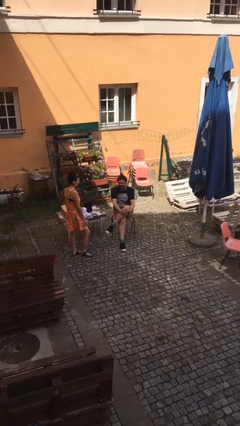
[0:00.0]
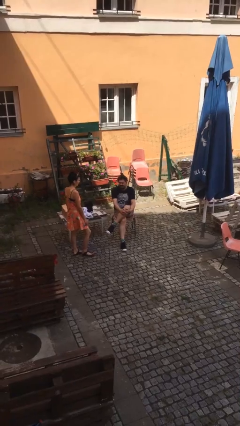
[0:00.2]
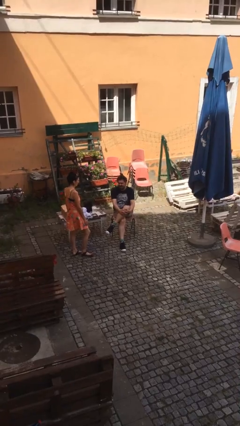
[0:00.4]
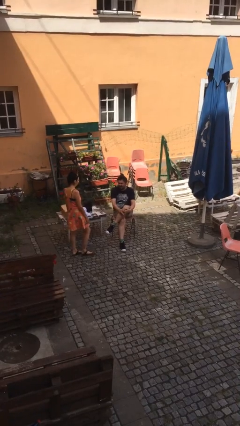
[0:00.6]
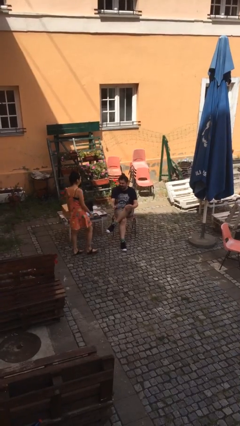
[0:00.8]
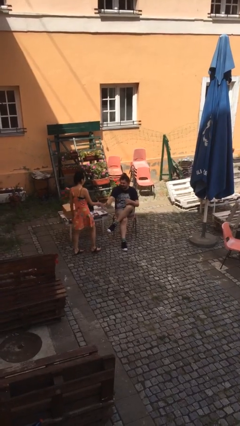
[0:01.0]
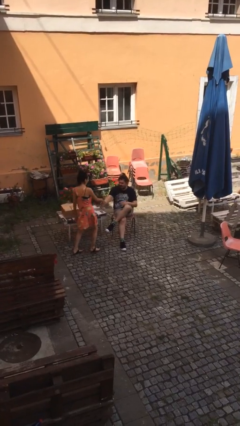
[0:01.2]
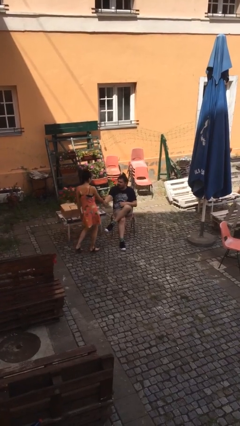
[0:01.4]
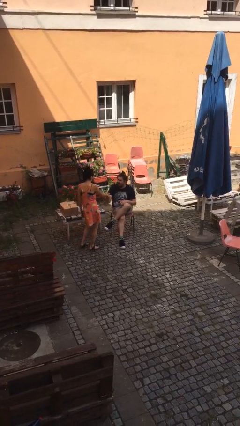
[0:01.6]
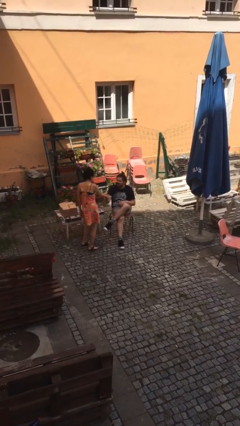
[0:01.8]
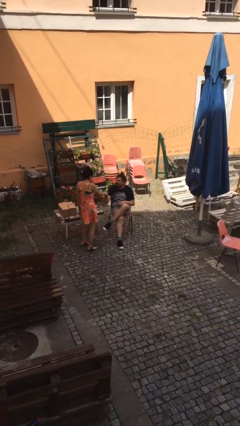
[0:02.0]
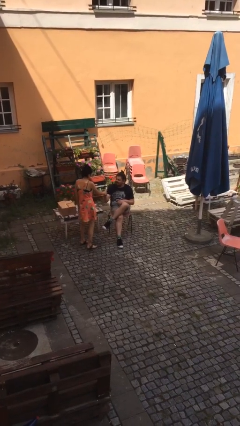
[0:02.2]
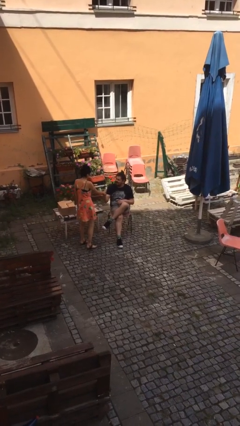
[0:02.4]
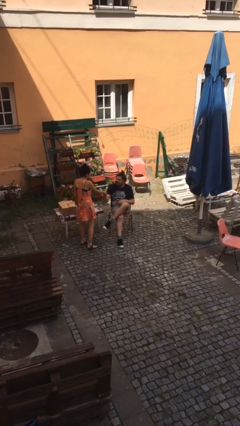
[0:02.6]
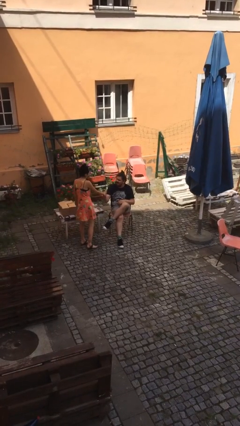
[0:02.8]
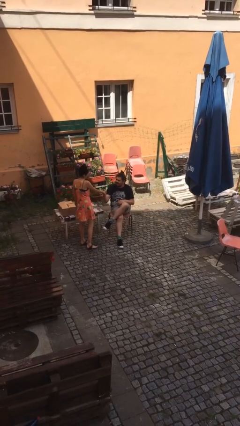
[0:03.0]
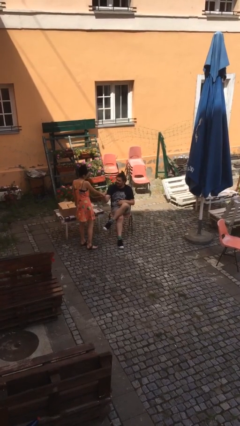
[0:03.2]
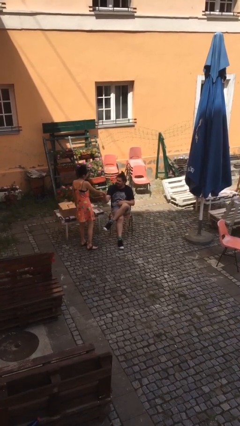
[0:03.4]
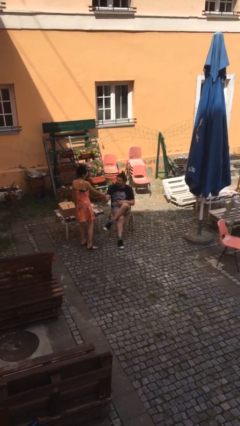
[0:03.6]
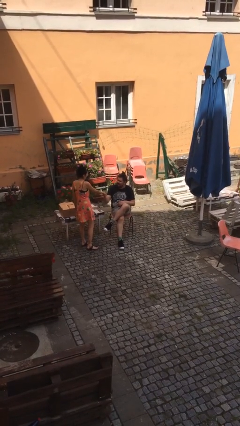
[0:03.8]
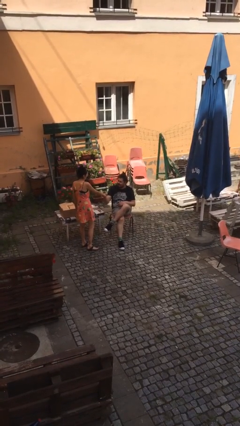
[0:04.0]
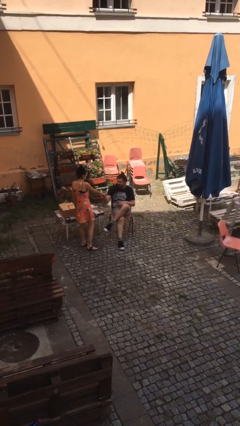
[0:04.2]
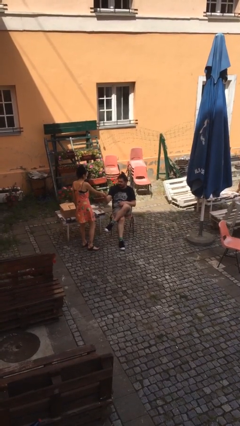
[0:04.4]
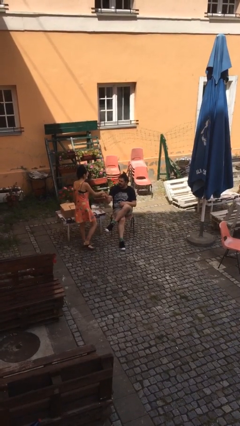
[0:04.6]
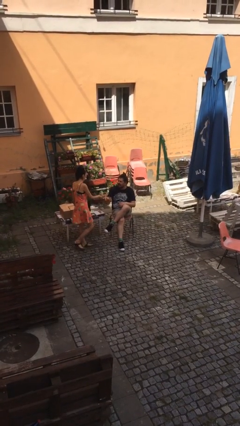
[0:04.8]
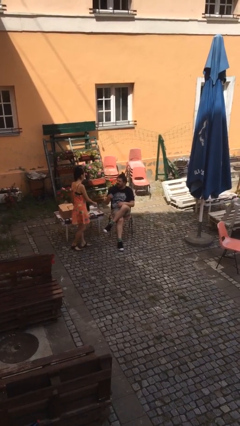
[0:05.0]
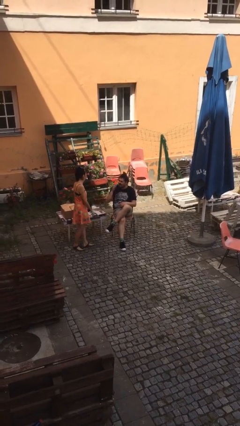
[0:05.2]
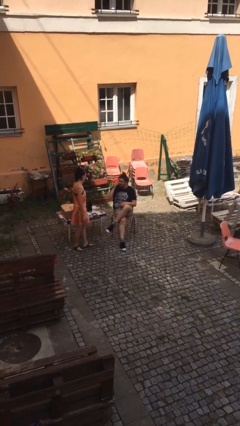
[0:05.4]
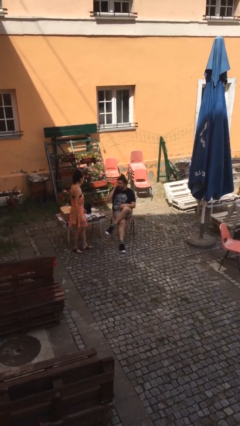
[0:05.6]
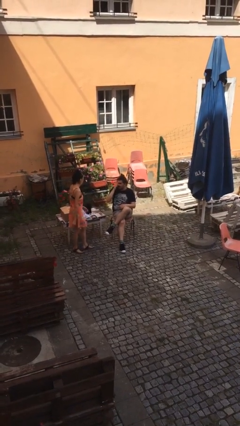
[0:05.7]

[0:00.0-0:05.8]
person shakes hand

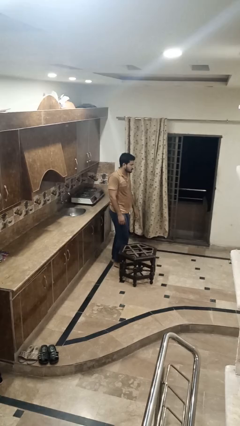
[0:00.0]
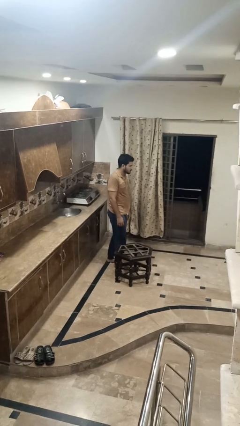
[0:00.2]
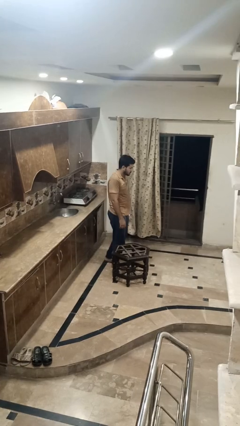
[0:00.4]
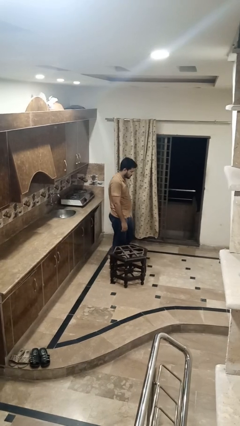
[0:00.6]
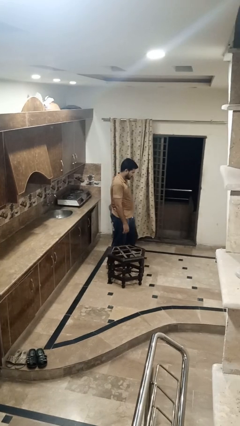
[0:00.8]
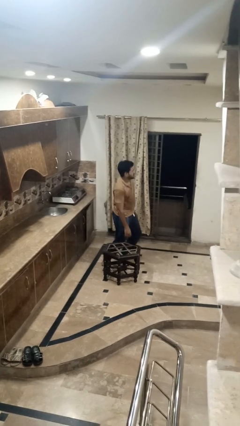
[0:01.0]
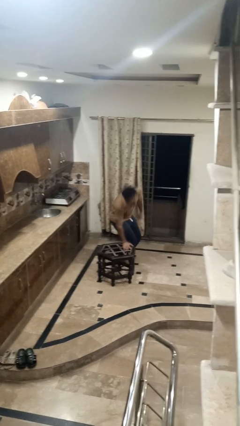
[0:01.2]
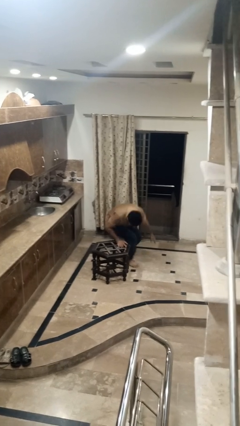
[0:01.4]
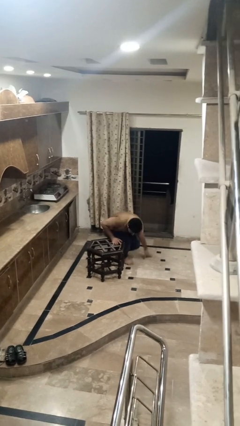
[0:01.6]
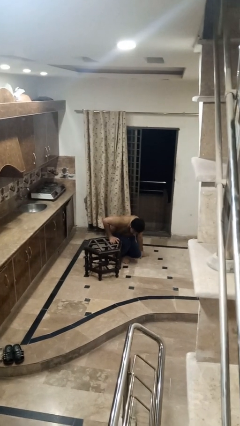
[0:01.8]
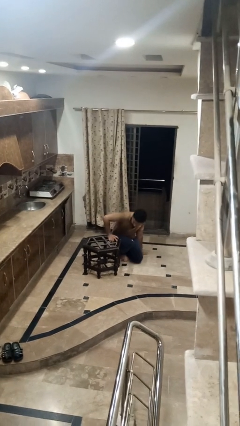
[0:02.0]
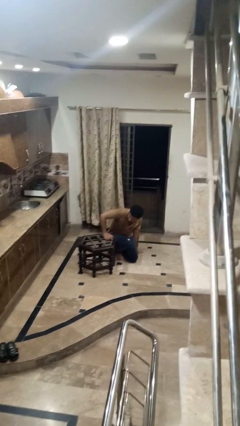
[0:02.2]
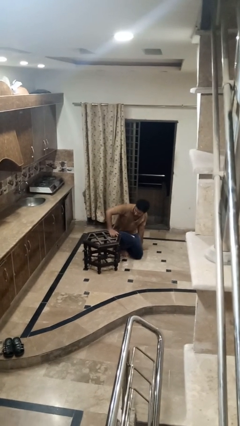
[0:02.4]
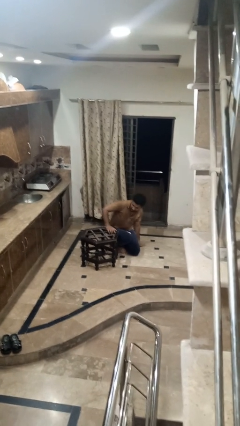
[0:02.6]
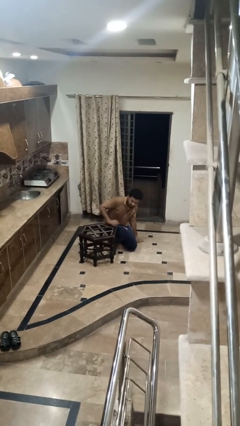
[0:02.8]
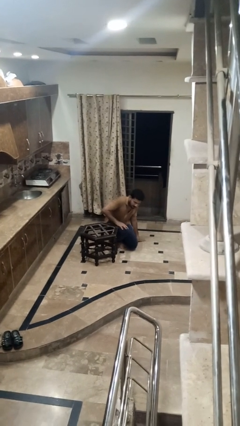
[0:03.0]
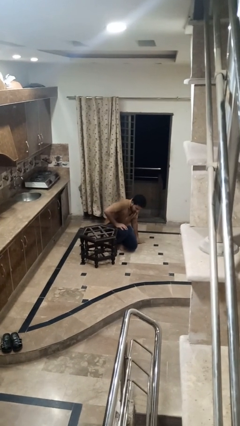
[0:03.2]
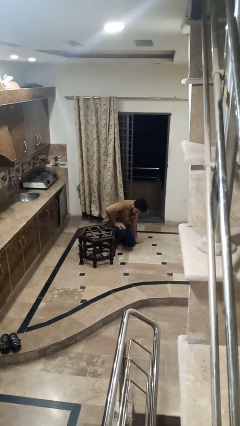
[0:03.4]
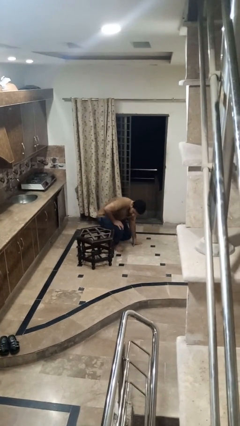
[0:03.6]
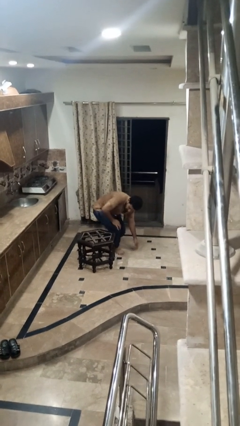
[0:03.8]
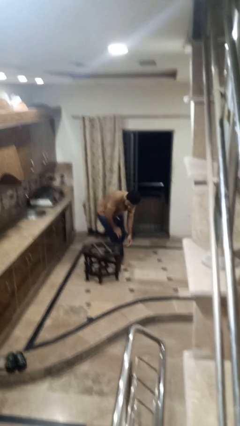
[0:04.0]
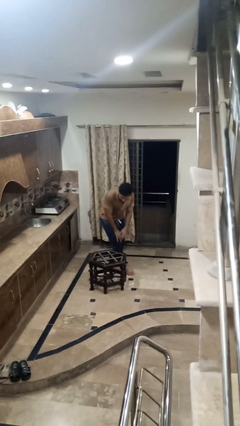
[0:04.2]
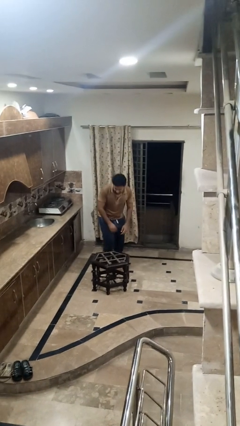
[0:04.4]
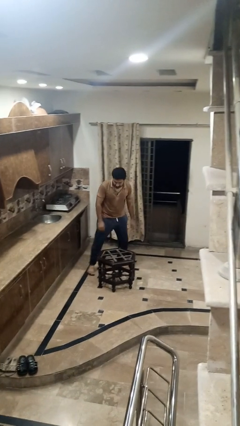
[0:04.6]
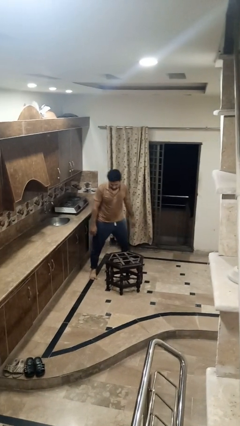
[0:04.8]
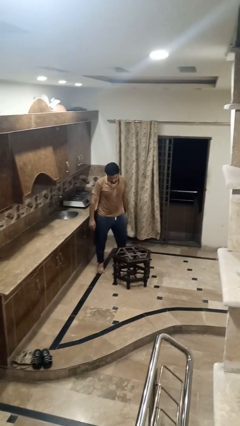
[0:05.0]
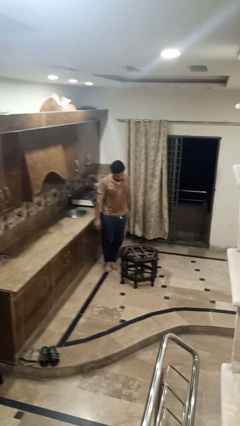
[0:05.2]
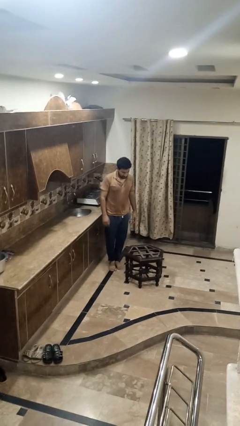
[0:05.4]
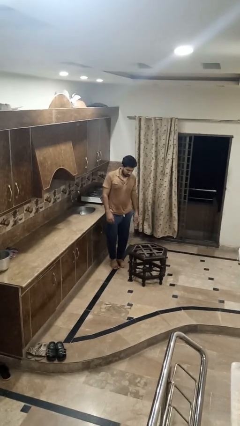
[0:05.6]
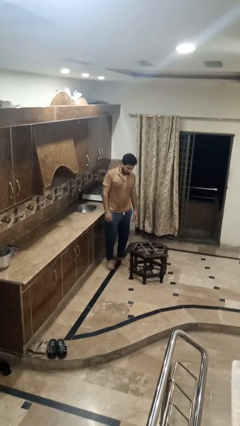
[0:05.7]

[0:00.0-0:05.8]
person bumps into table

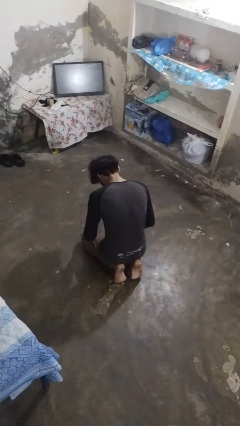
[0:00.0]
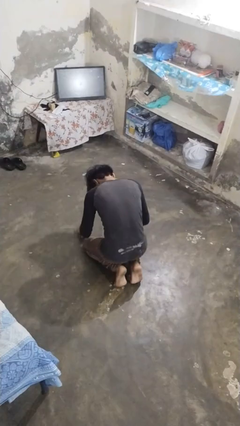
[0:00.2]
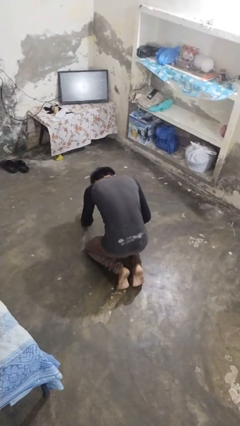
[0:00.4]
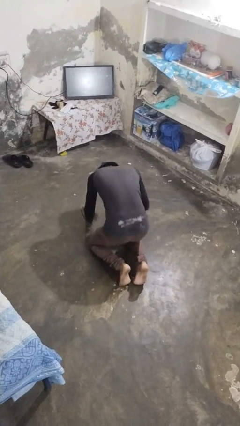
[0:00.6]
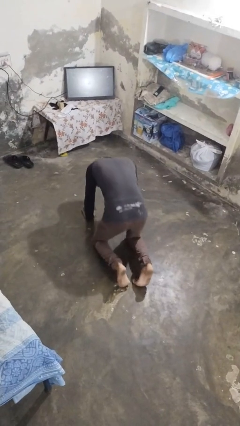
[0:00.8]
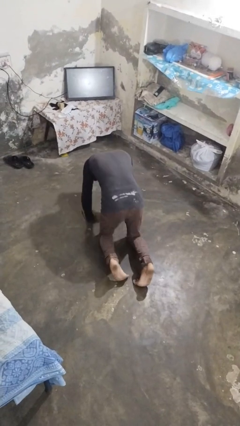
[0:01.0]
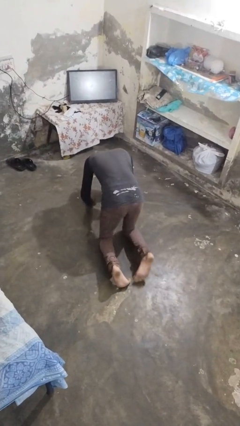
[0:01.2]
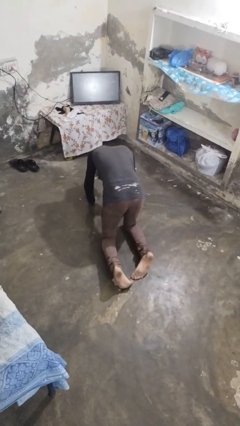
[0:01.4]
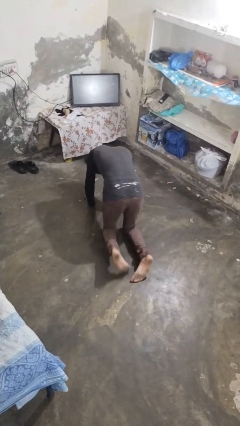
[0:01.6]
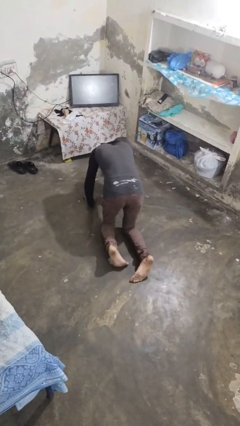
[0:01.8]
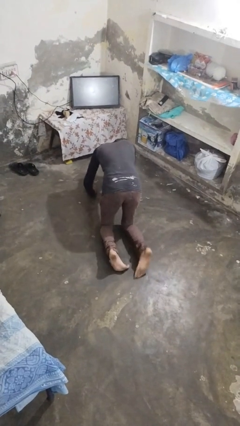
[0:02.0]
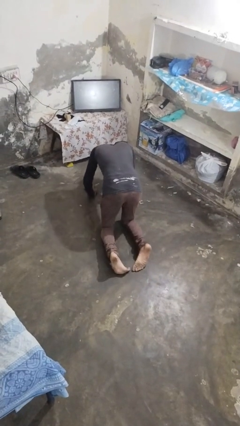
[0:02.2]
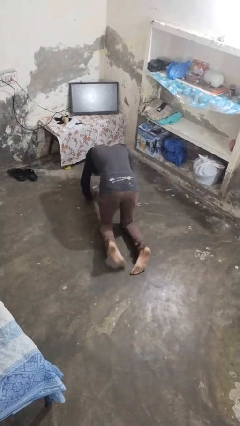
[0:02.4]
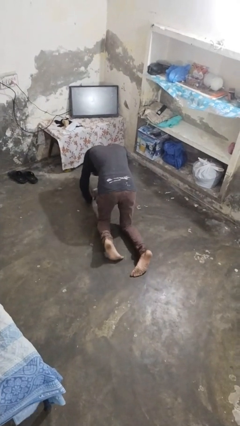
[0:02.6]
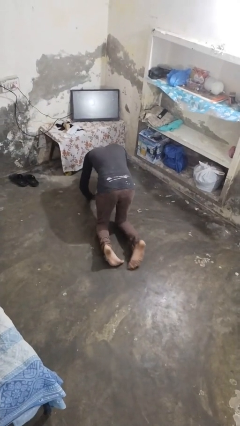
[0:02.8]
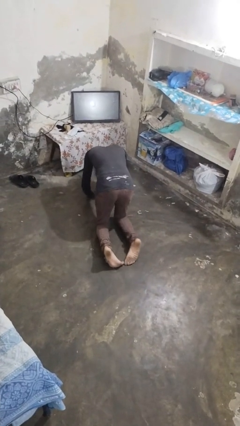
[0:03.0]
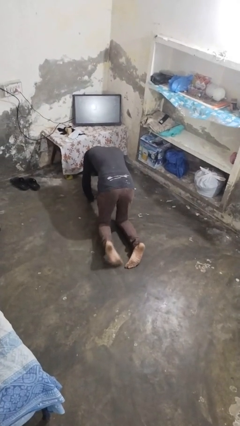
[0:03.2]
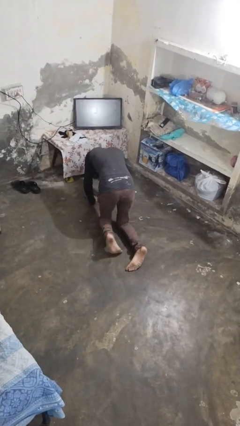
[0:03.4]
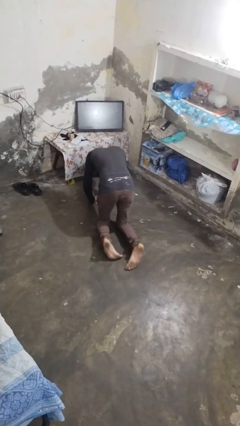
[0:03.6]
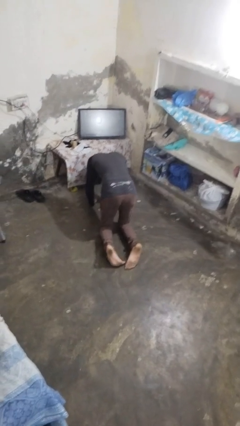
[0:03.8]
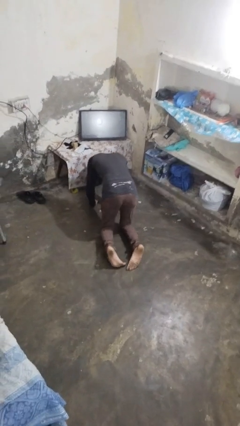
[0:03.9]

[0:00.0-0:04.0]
person crawls

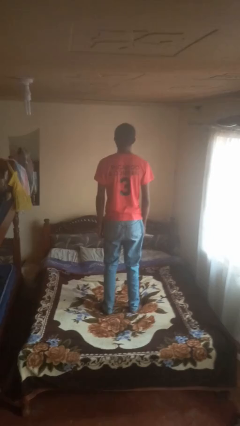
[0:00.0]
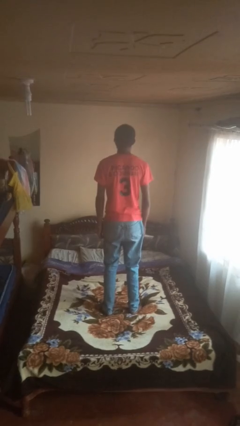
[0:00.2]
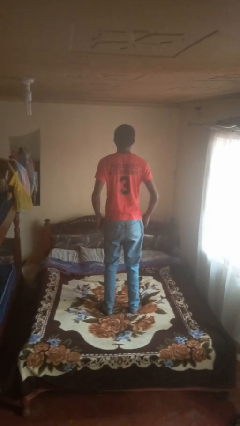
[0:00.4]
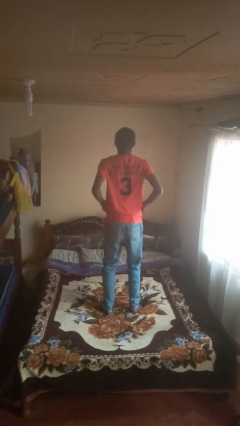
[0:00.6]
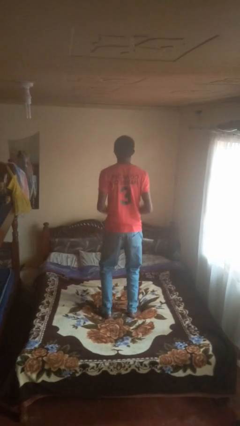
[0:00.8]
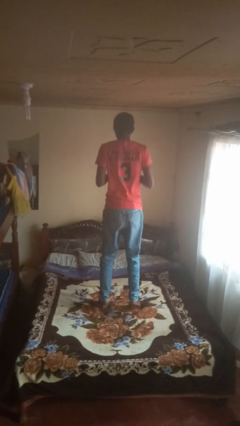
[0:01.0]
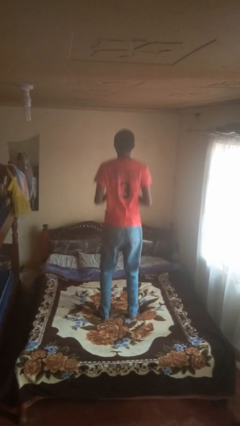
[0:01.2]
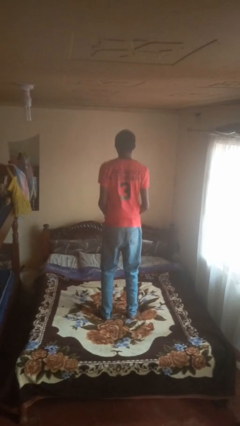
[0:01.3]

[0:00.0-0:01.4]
person jumps on bed

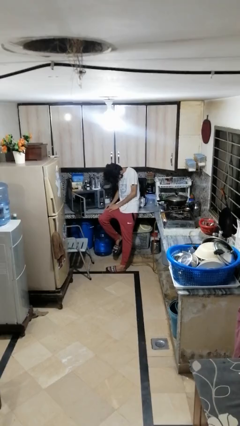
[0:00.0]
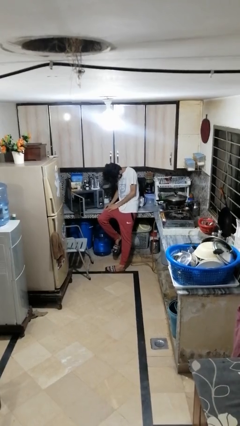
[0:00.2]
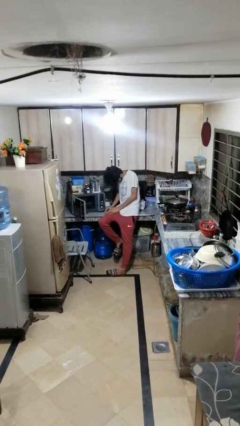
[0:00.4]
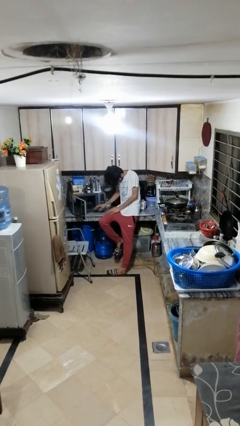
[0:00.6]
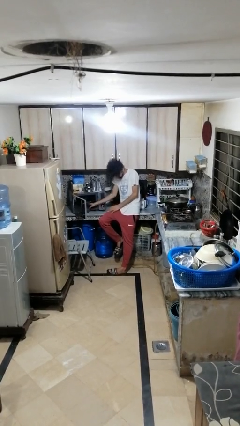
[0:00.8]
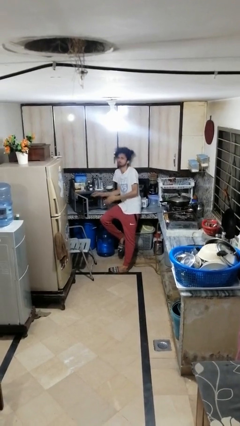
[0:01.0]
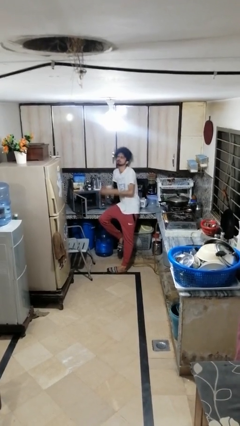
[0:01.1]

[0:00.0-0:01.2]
person burns hand
